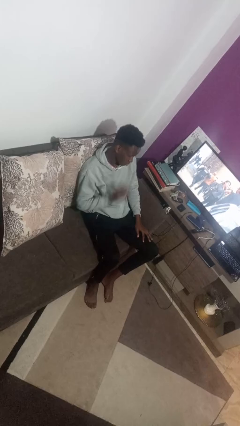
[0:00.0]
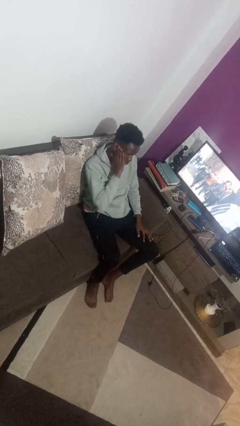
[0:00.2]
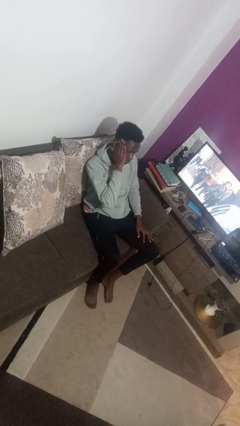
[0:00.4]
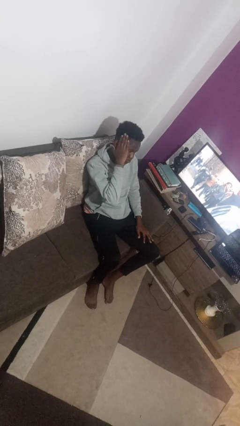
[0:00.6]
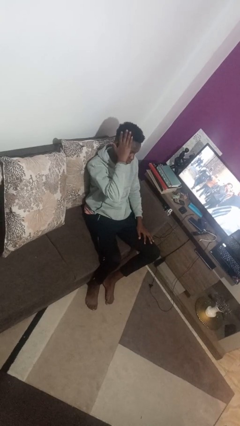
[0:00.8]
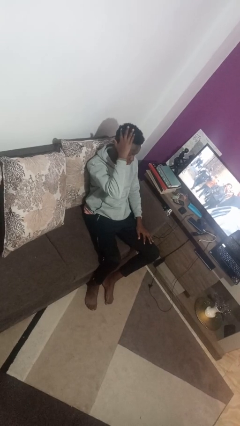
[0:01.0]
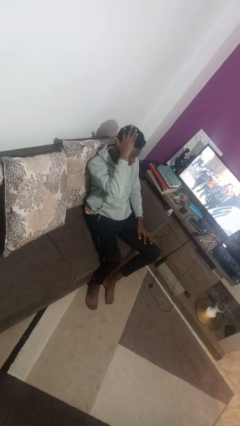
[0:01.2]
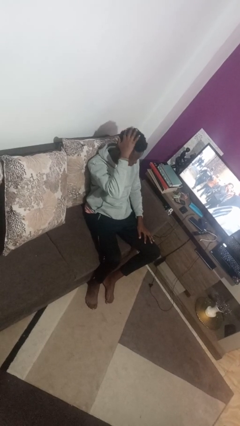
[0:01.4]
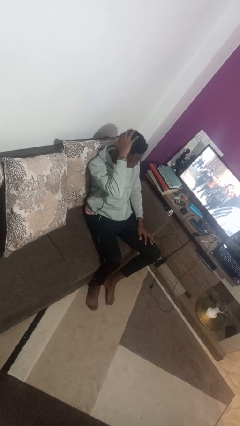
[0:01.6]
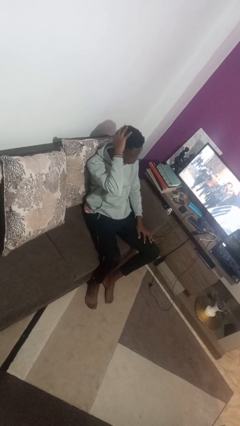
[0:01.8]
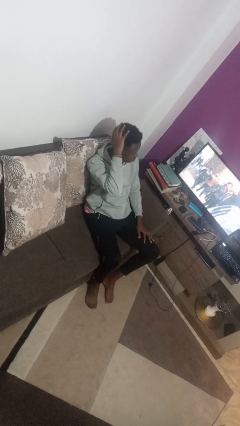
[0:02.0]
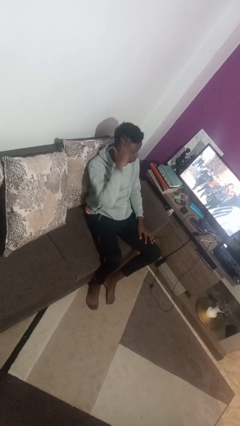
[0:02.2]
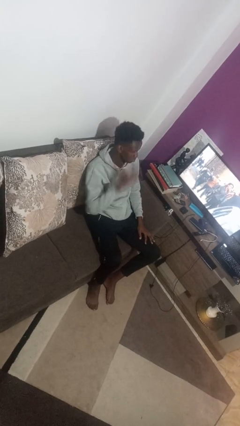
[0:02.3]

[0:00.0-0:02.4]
person strokes hair

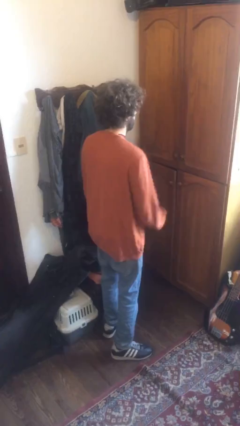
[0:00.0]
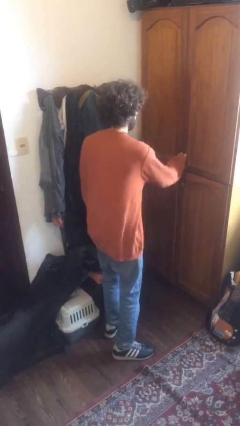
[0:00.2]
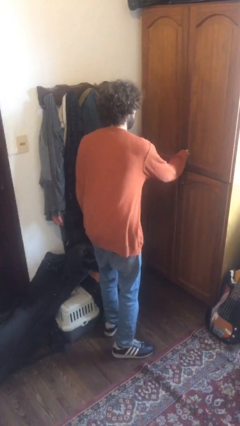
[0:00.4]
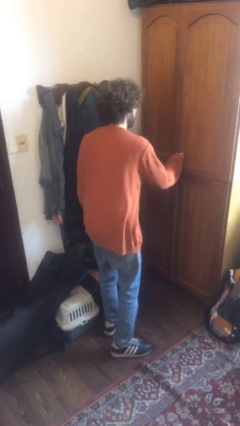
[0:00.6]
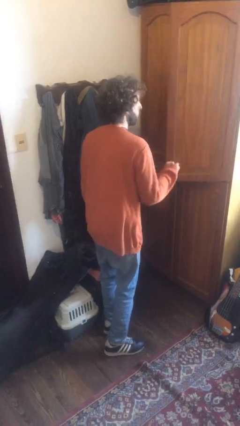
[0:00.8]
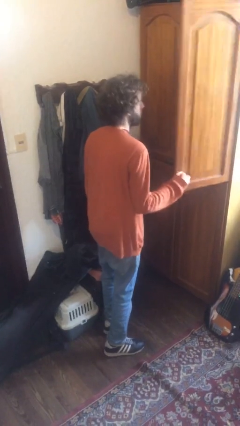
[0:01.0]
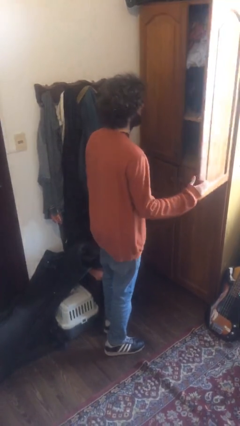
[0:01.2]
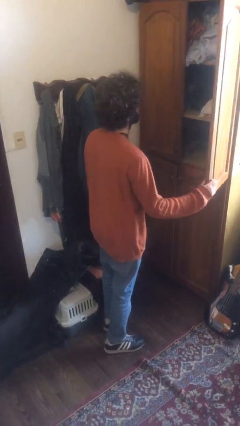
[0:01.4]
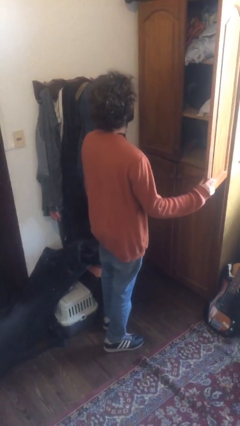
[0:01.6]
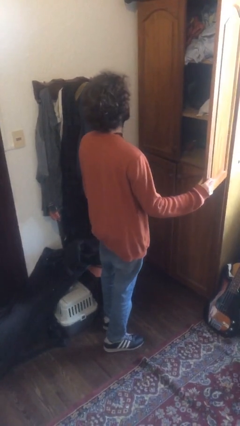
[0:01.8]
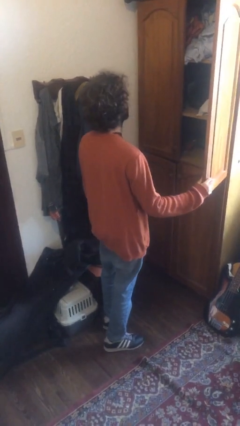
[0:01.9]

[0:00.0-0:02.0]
person opens dresser drawer

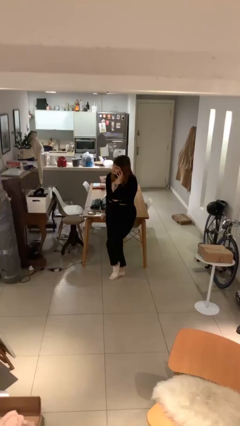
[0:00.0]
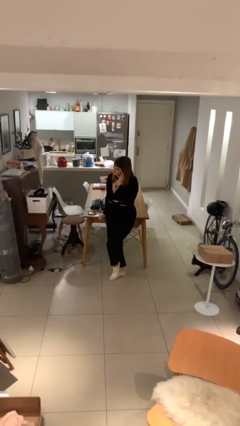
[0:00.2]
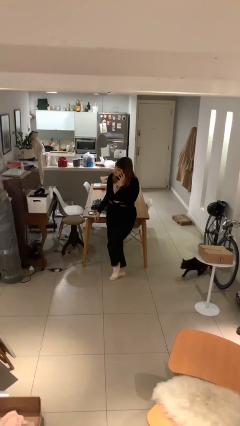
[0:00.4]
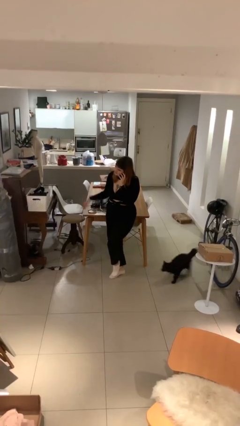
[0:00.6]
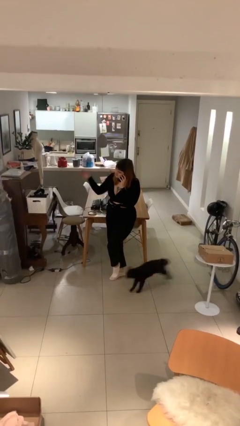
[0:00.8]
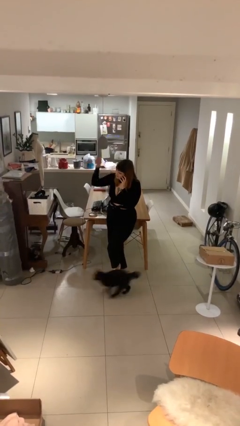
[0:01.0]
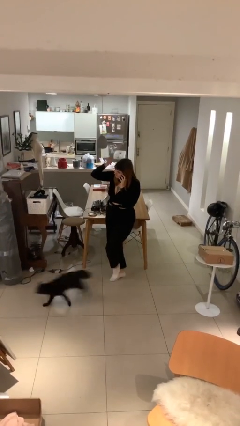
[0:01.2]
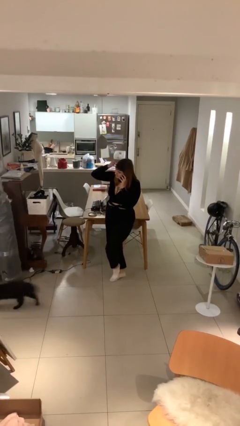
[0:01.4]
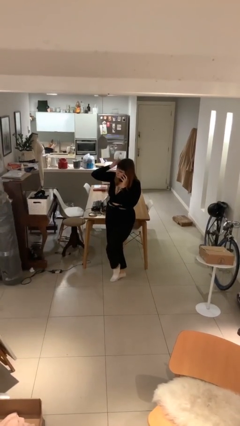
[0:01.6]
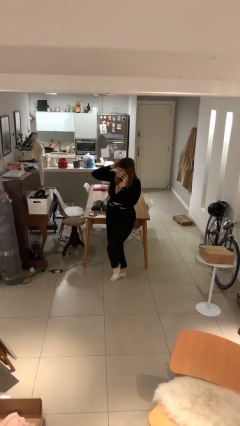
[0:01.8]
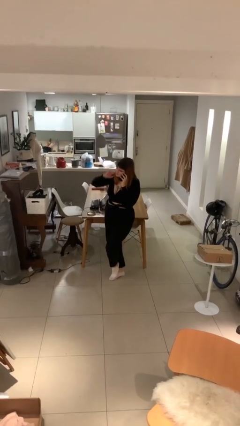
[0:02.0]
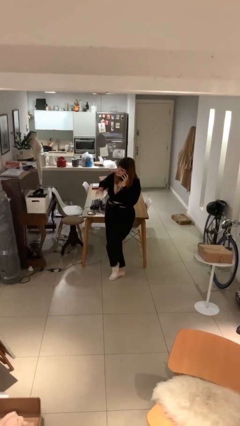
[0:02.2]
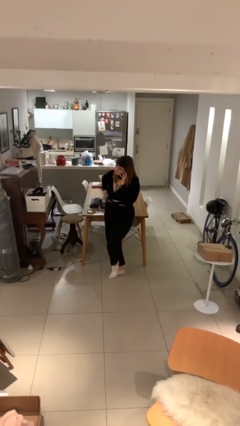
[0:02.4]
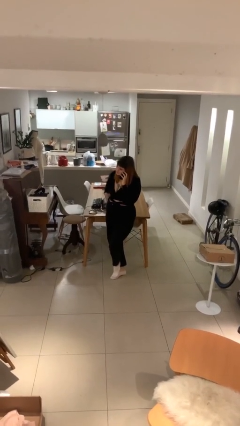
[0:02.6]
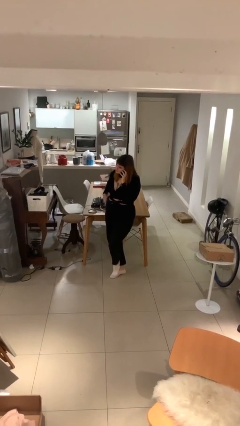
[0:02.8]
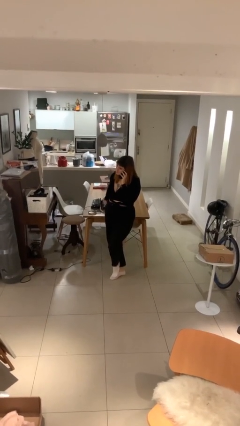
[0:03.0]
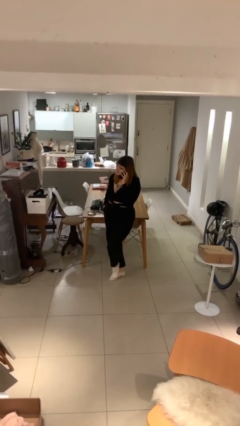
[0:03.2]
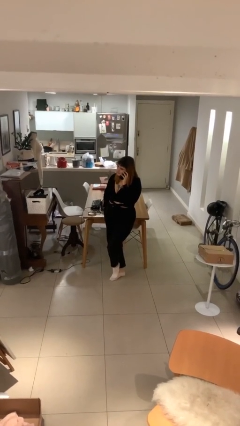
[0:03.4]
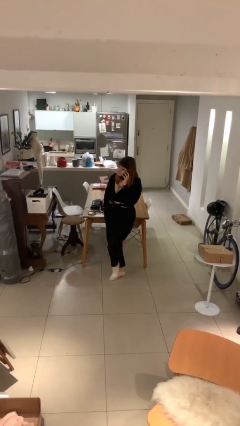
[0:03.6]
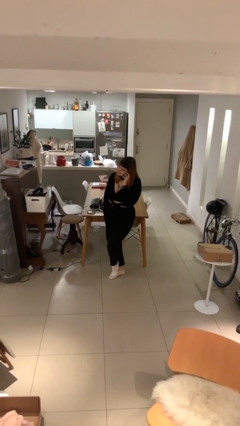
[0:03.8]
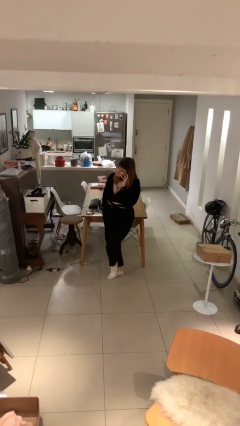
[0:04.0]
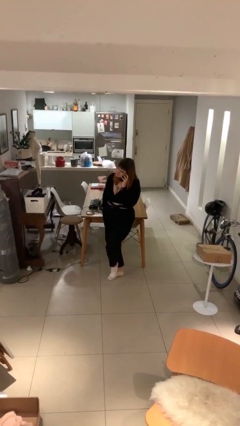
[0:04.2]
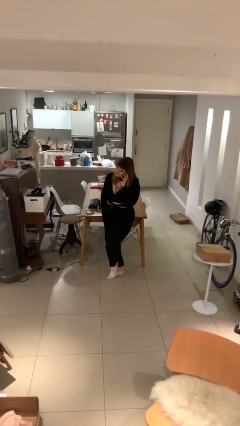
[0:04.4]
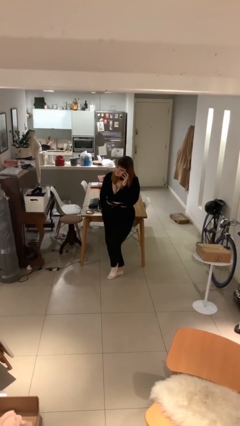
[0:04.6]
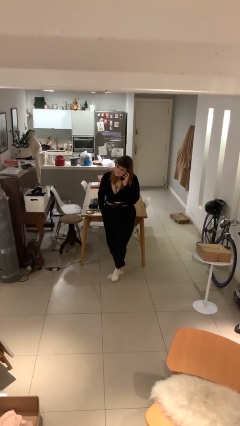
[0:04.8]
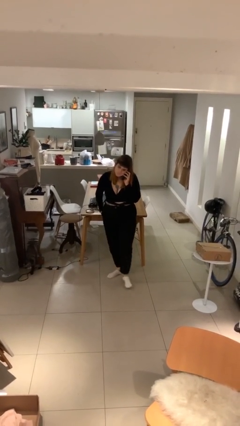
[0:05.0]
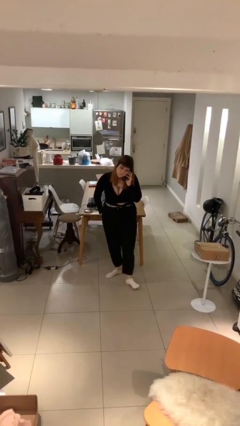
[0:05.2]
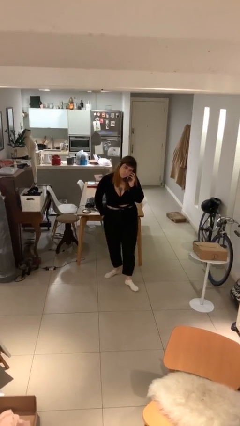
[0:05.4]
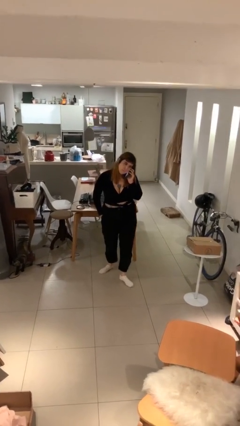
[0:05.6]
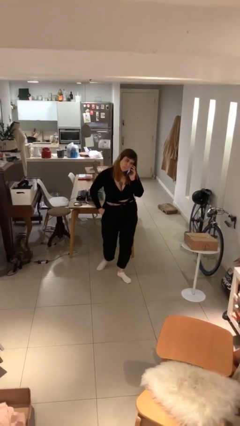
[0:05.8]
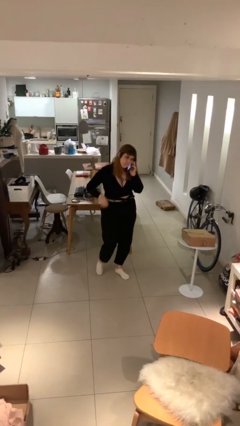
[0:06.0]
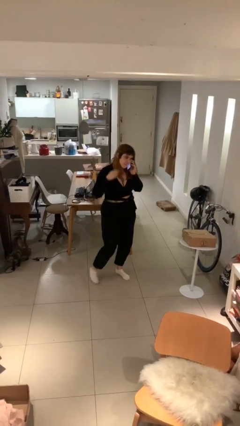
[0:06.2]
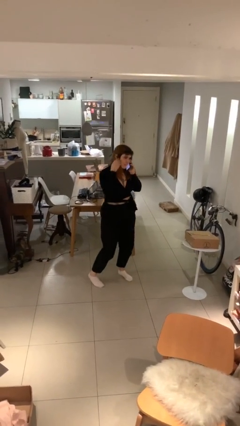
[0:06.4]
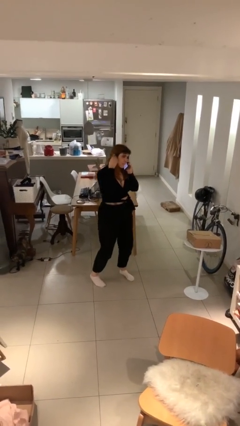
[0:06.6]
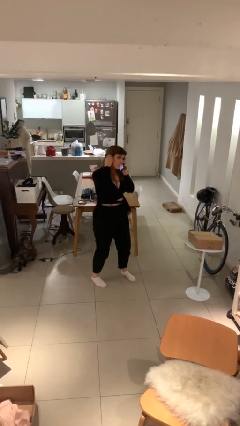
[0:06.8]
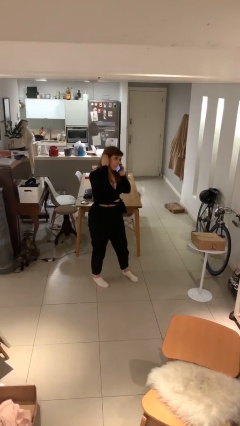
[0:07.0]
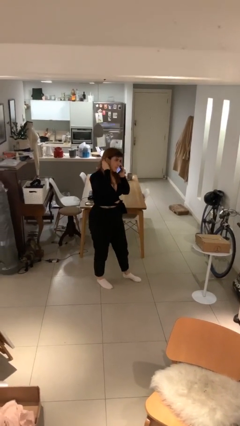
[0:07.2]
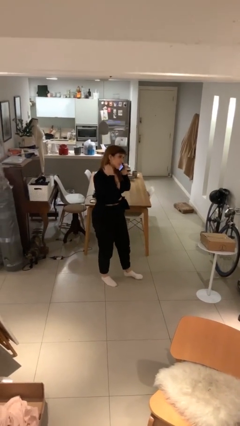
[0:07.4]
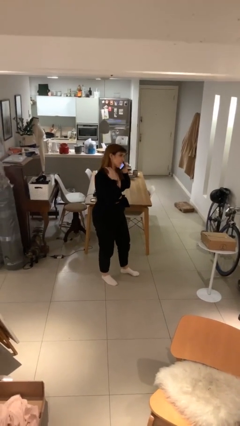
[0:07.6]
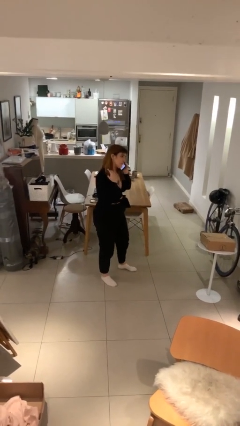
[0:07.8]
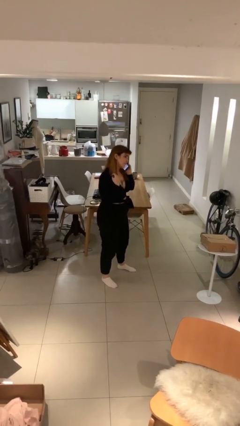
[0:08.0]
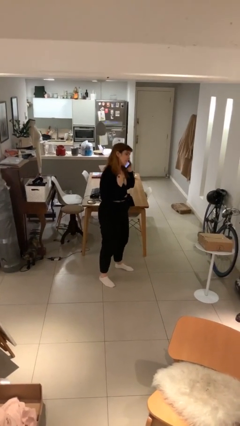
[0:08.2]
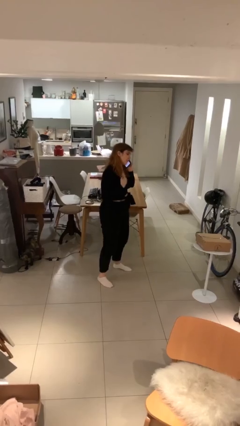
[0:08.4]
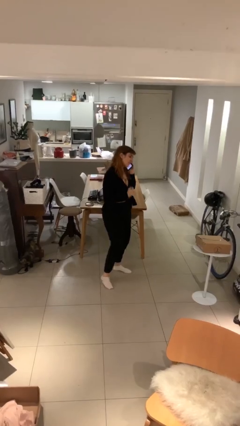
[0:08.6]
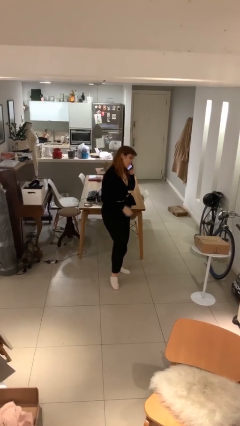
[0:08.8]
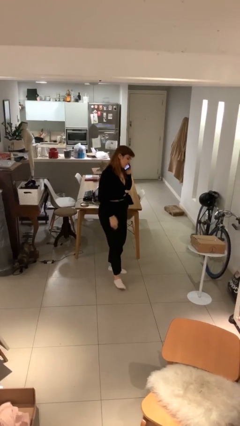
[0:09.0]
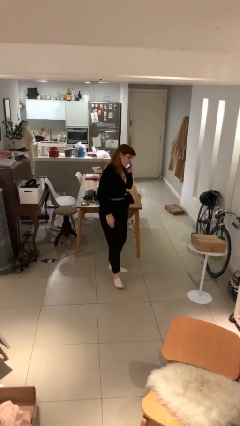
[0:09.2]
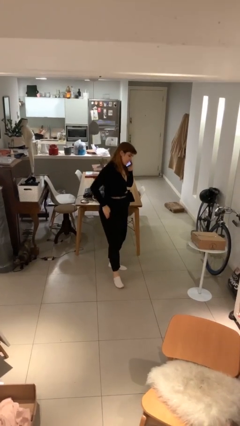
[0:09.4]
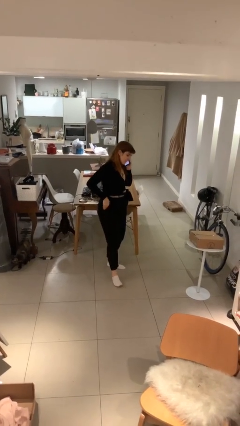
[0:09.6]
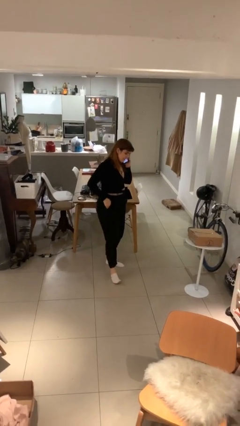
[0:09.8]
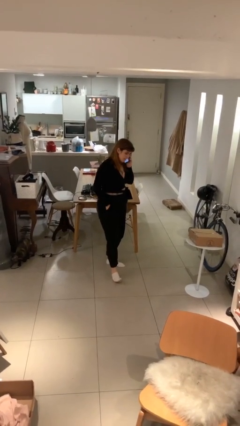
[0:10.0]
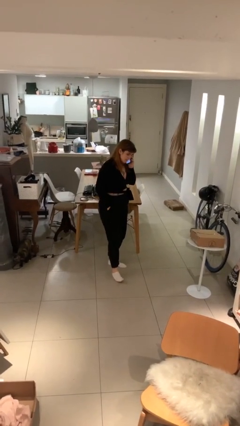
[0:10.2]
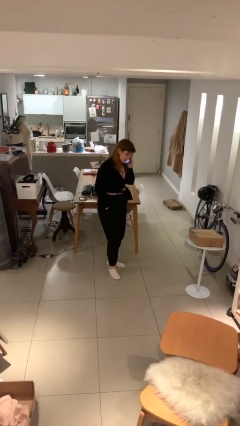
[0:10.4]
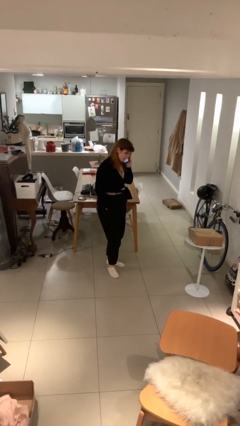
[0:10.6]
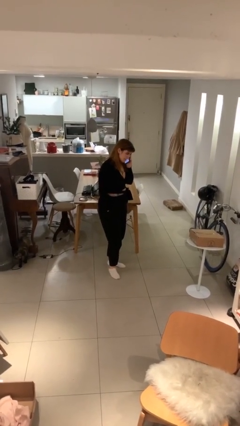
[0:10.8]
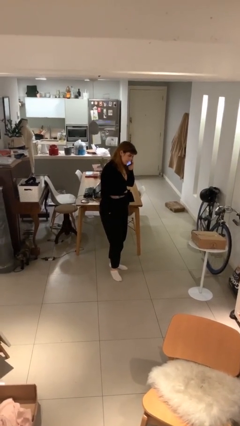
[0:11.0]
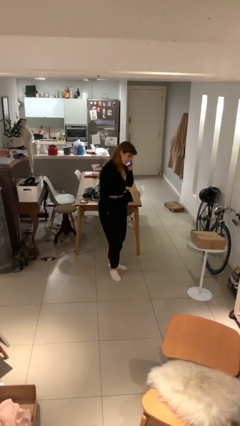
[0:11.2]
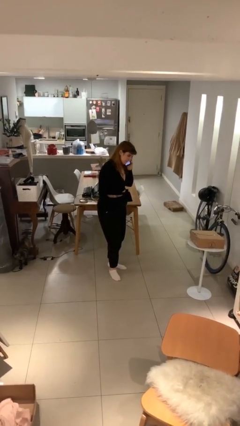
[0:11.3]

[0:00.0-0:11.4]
person talks on phone

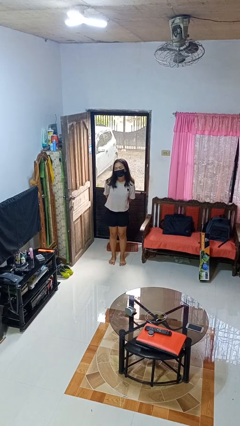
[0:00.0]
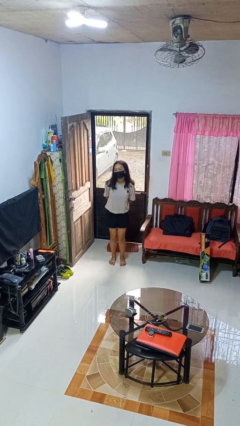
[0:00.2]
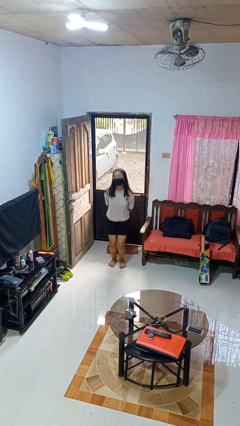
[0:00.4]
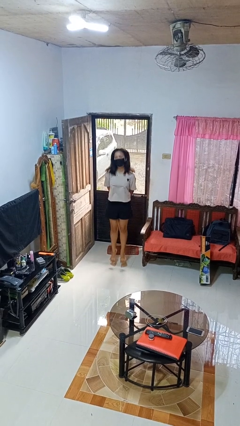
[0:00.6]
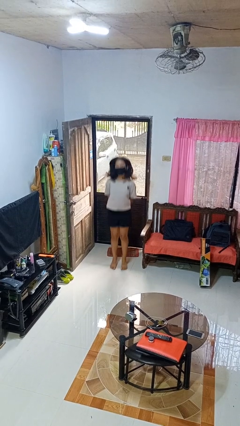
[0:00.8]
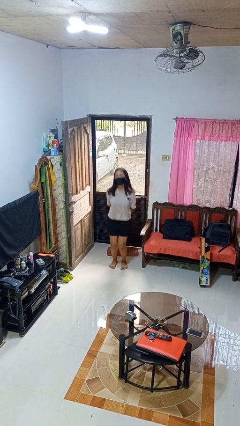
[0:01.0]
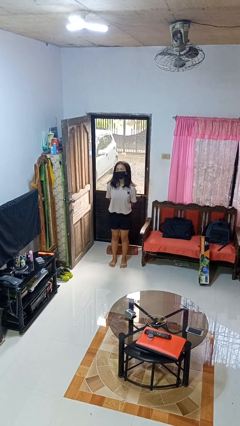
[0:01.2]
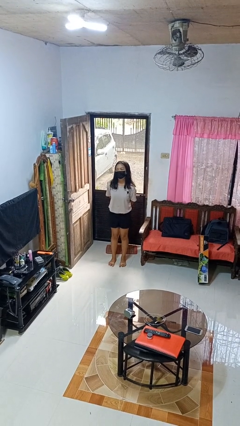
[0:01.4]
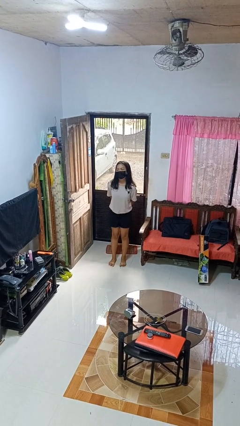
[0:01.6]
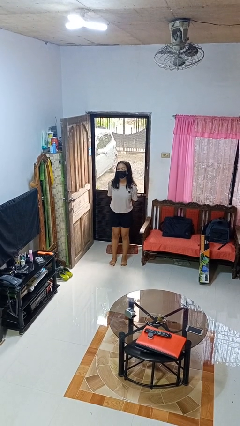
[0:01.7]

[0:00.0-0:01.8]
person jumps

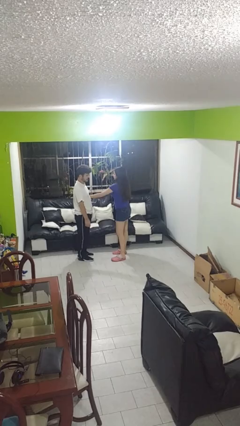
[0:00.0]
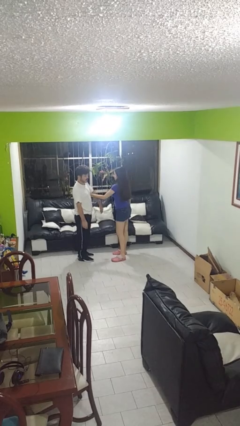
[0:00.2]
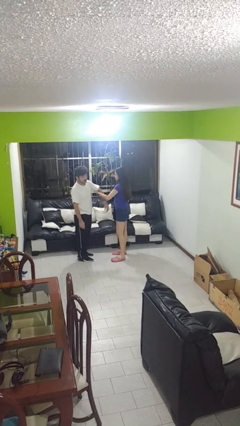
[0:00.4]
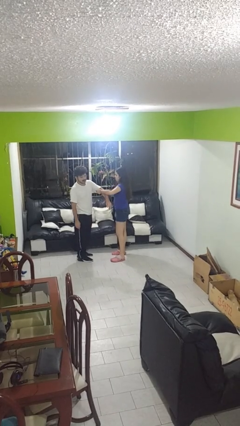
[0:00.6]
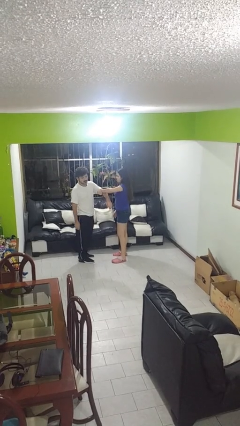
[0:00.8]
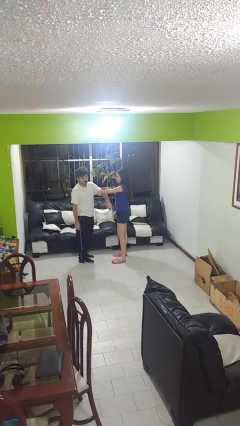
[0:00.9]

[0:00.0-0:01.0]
person grabs person by bicep
